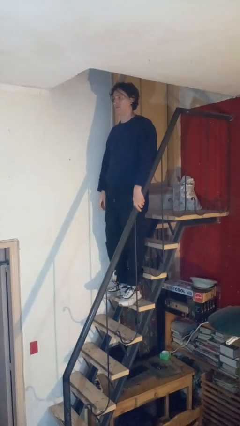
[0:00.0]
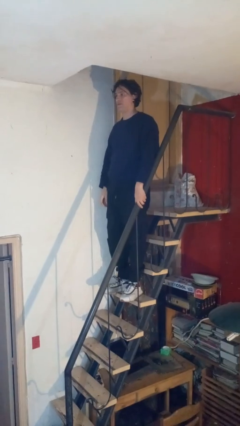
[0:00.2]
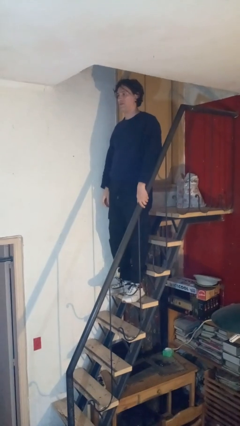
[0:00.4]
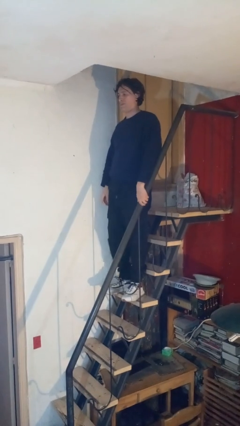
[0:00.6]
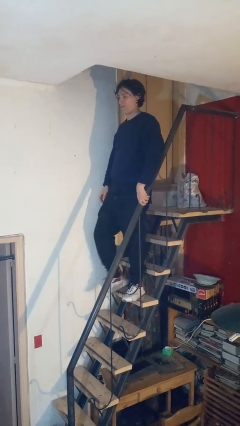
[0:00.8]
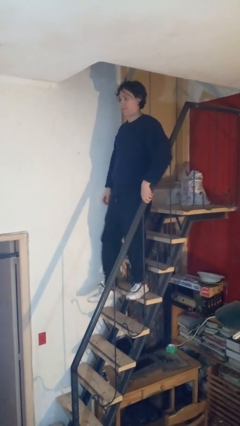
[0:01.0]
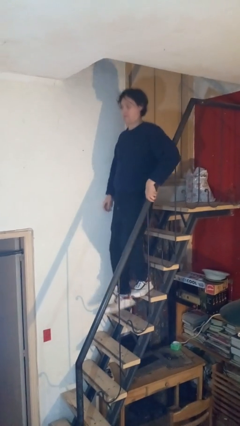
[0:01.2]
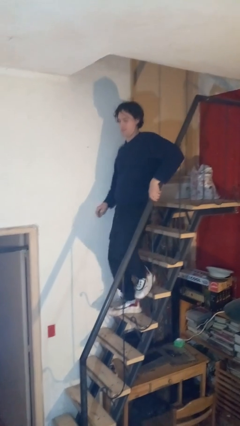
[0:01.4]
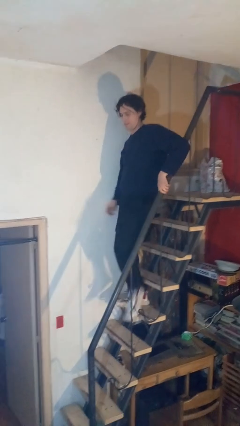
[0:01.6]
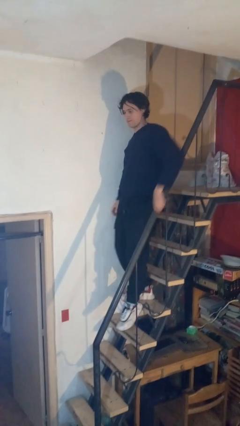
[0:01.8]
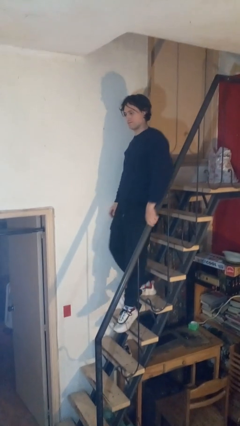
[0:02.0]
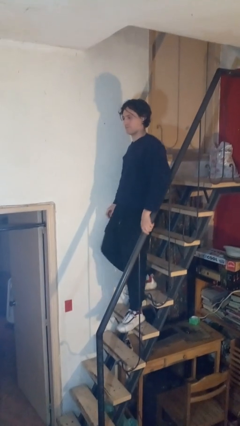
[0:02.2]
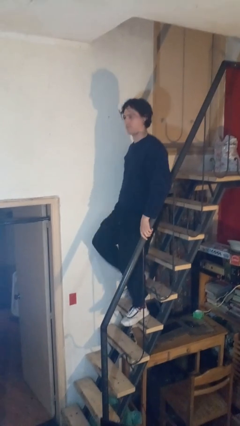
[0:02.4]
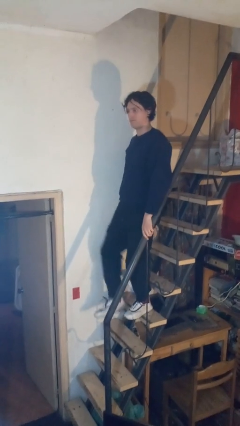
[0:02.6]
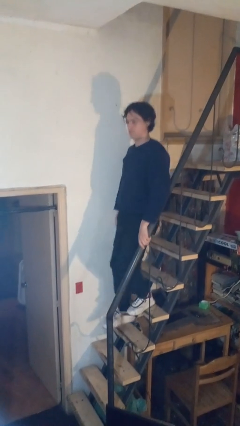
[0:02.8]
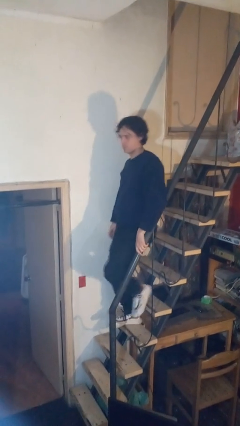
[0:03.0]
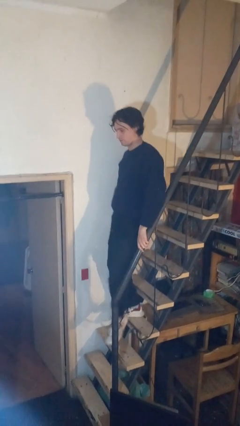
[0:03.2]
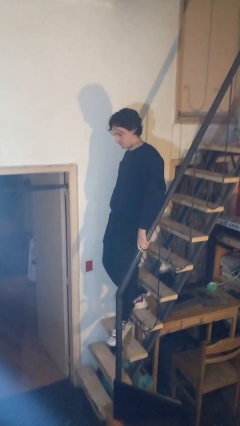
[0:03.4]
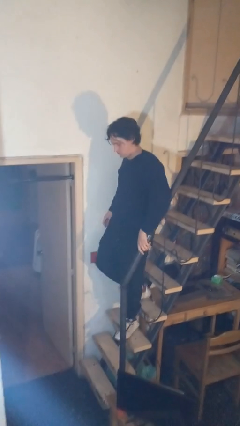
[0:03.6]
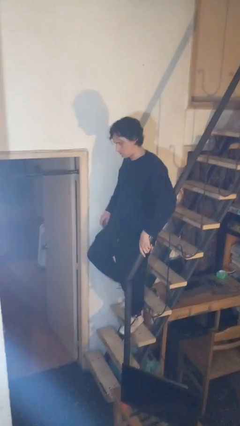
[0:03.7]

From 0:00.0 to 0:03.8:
person climbs down stairs

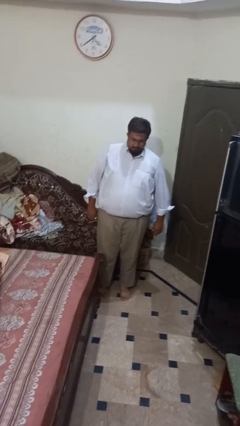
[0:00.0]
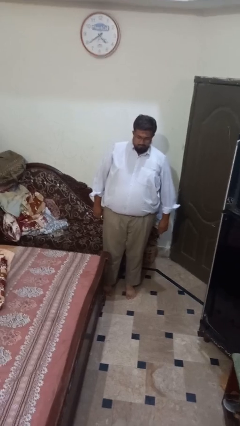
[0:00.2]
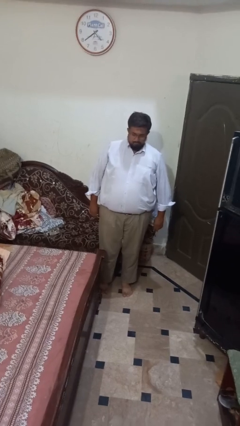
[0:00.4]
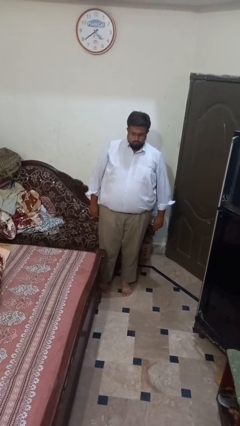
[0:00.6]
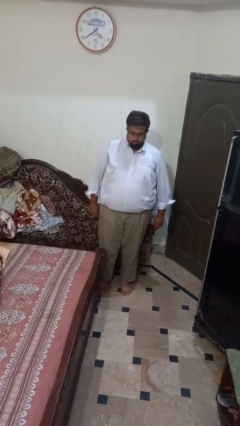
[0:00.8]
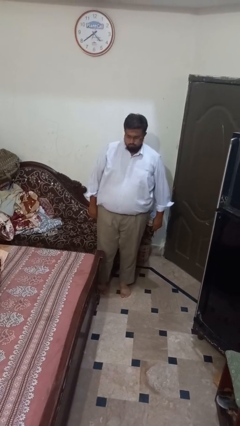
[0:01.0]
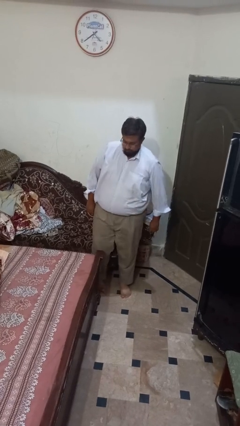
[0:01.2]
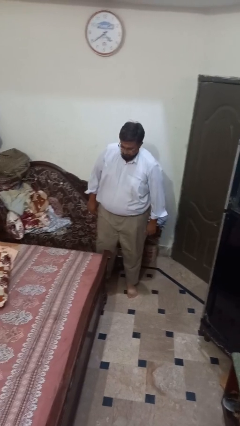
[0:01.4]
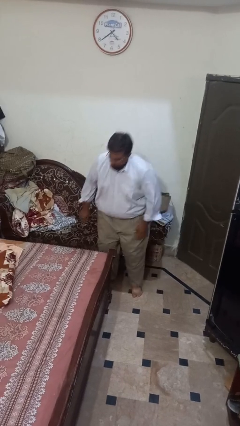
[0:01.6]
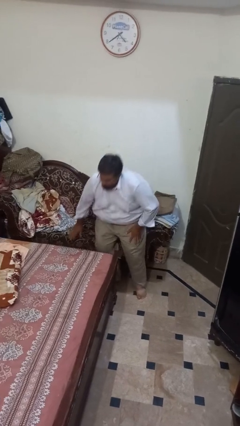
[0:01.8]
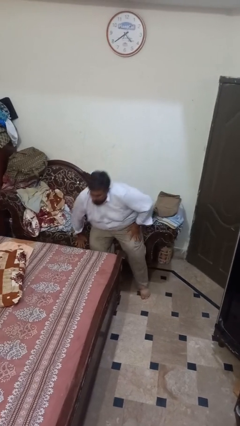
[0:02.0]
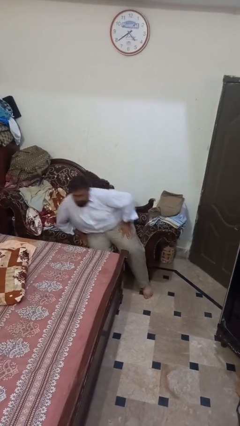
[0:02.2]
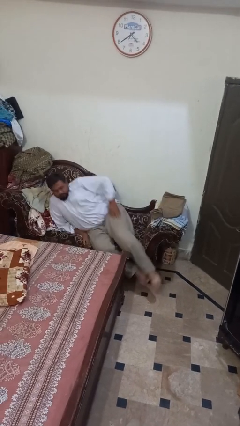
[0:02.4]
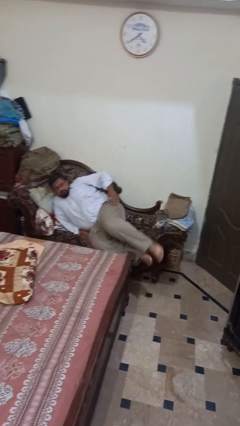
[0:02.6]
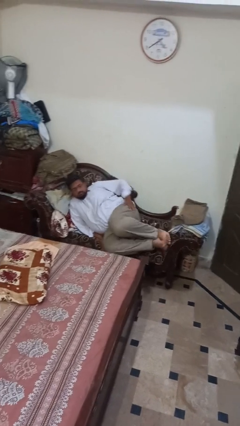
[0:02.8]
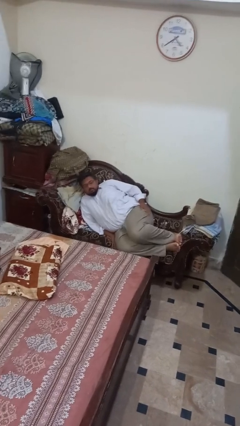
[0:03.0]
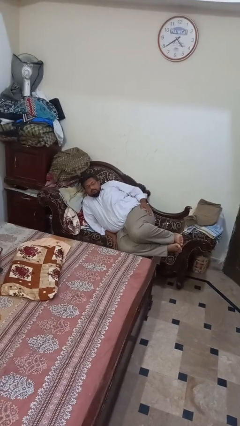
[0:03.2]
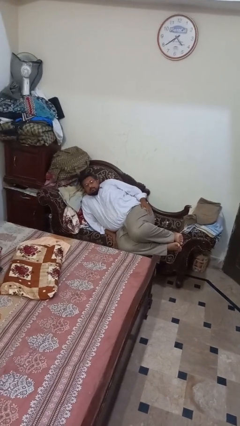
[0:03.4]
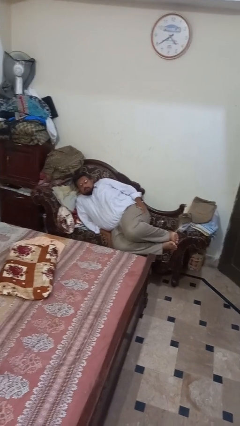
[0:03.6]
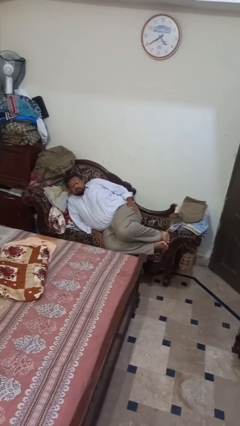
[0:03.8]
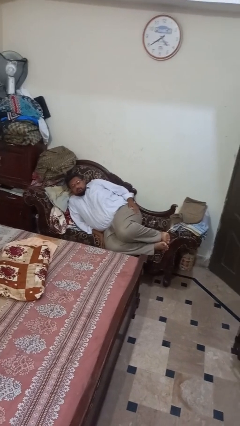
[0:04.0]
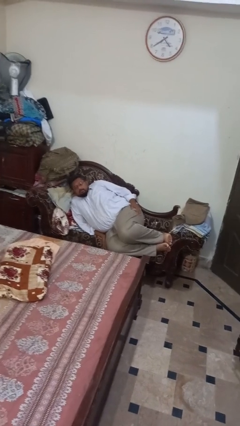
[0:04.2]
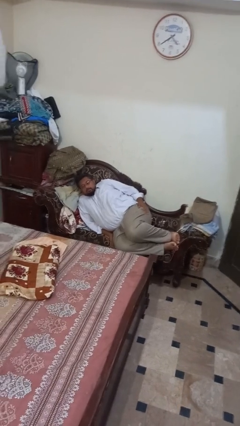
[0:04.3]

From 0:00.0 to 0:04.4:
person lies down on couch

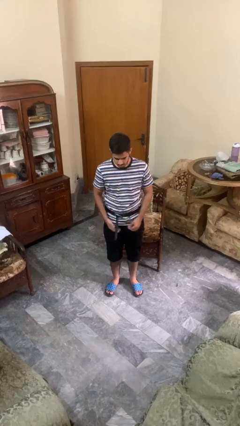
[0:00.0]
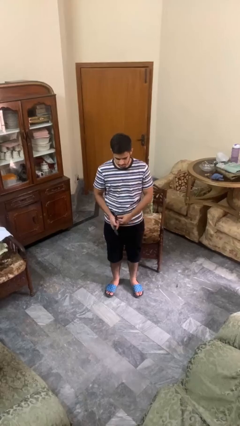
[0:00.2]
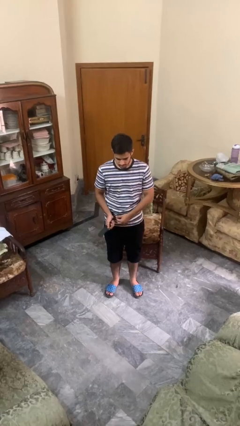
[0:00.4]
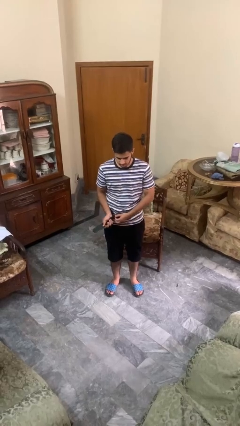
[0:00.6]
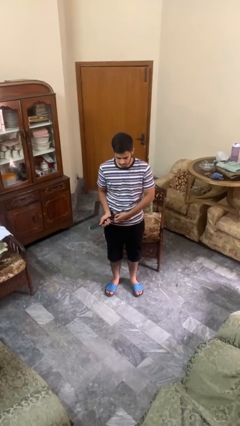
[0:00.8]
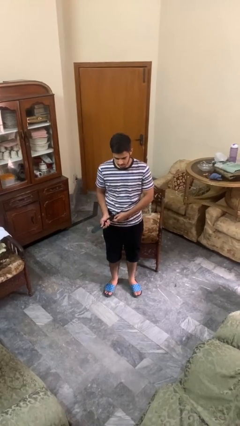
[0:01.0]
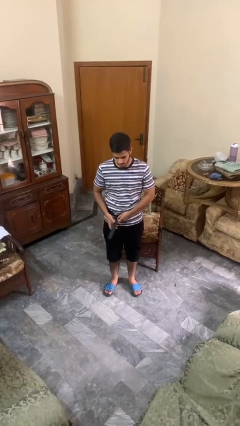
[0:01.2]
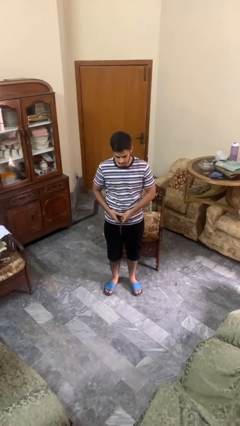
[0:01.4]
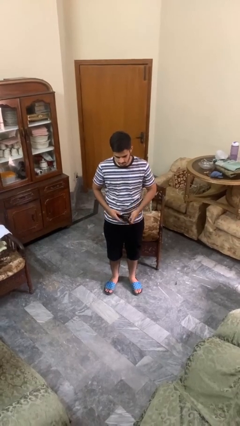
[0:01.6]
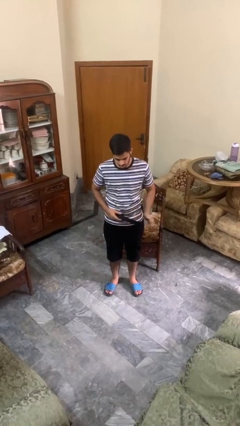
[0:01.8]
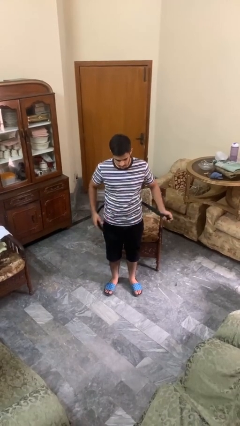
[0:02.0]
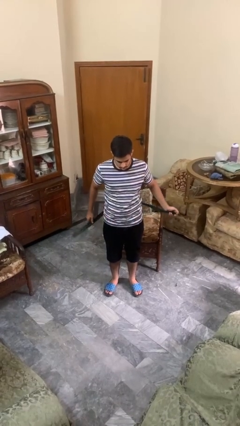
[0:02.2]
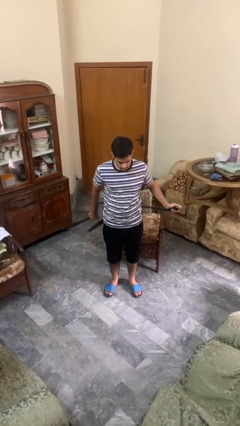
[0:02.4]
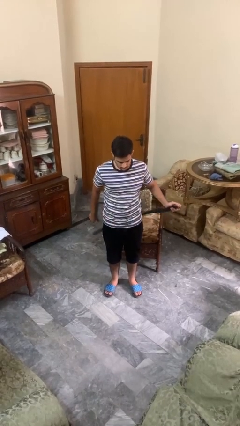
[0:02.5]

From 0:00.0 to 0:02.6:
person takes off belt

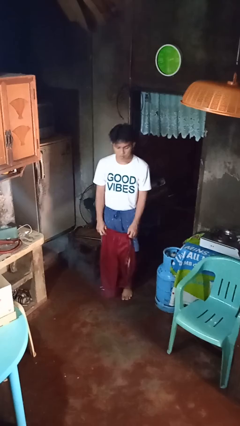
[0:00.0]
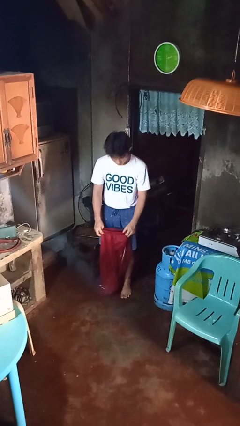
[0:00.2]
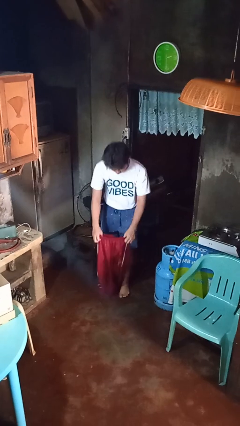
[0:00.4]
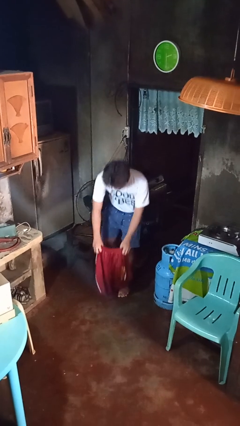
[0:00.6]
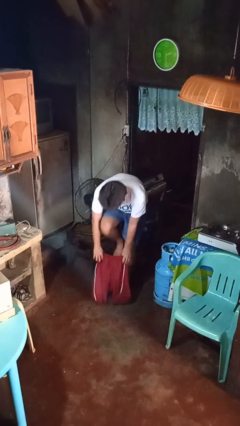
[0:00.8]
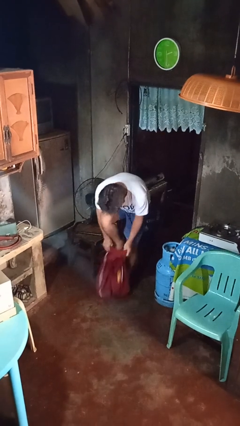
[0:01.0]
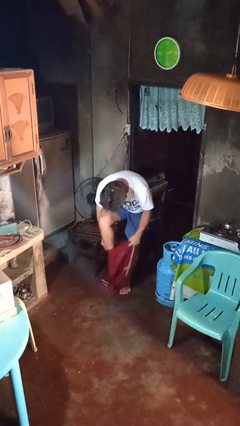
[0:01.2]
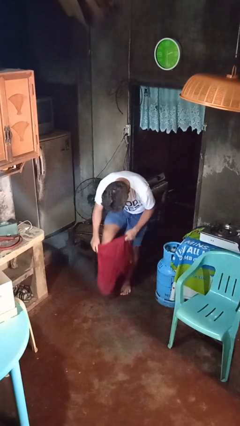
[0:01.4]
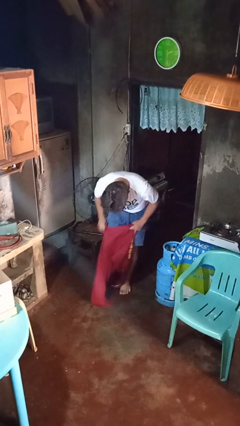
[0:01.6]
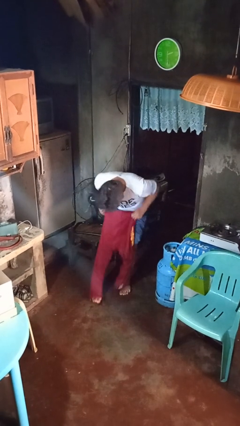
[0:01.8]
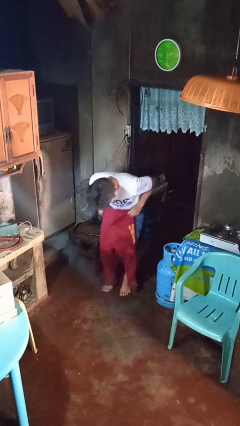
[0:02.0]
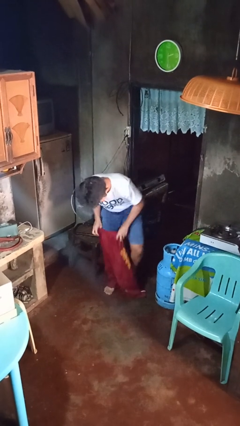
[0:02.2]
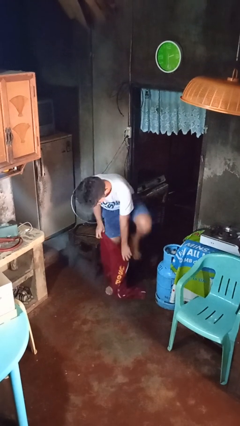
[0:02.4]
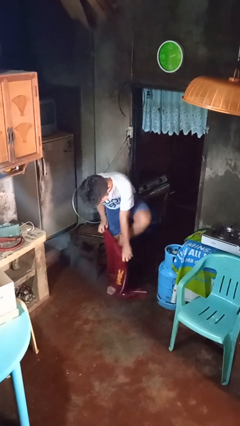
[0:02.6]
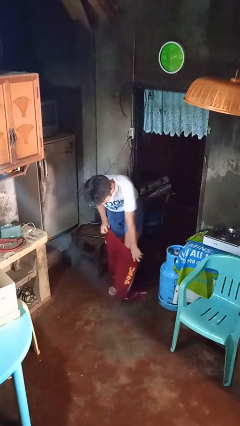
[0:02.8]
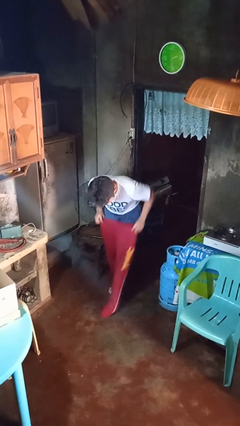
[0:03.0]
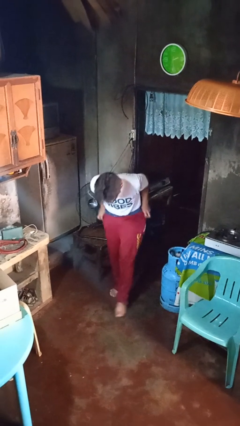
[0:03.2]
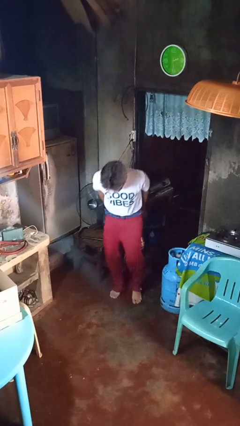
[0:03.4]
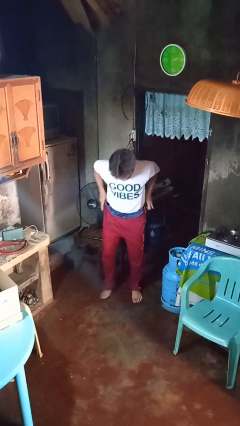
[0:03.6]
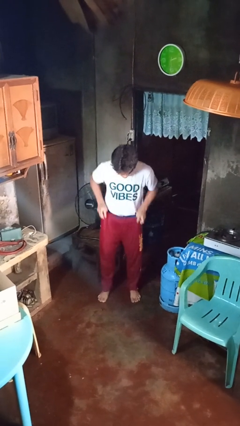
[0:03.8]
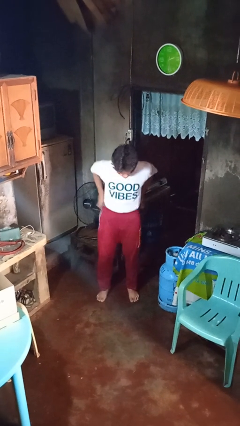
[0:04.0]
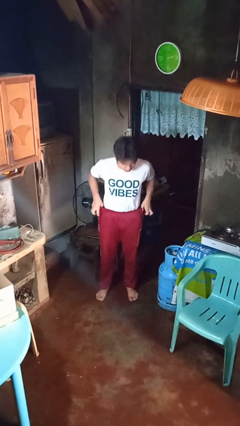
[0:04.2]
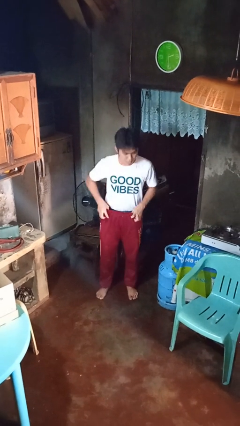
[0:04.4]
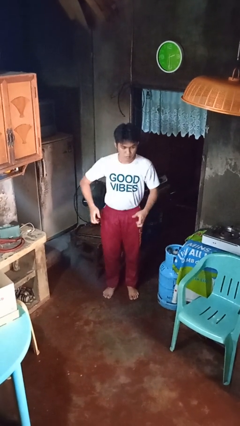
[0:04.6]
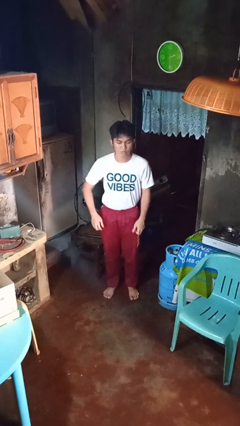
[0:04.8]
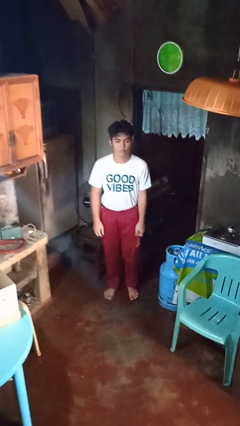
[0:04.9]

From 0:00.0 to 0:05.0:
person puts on pants

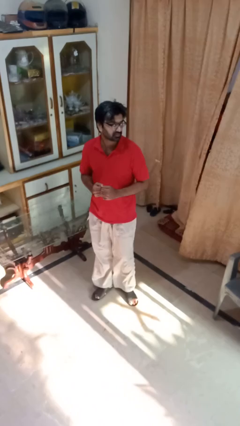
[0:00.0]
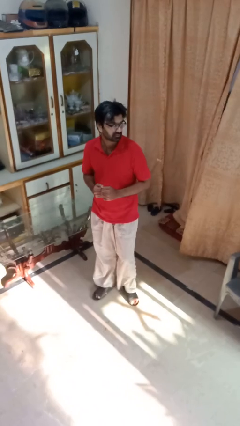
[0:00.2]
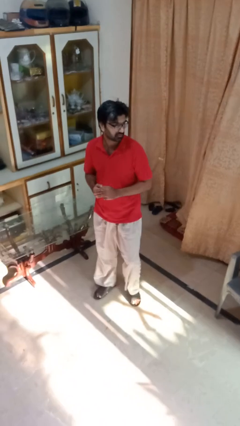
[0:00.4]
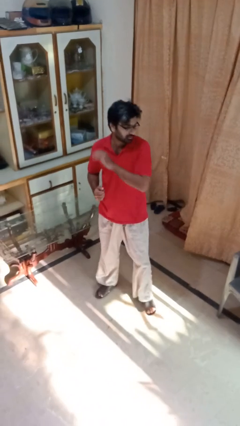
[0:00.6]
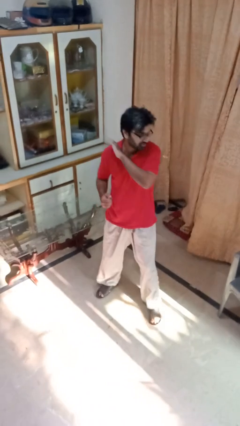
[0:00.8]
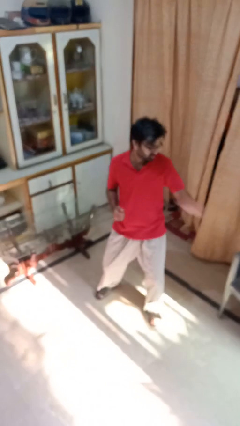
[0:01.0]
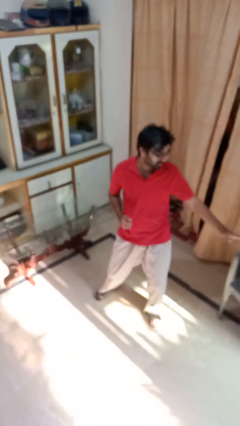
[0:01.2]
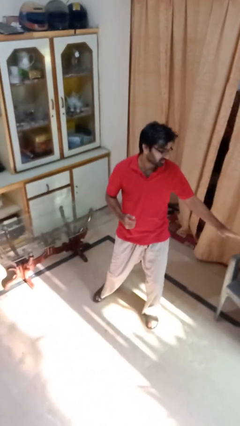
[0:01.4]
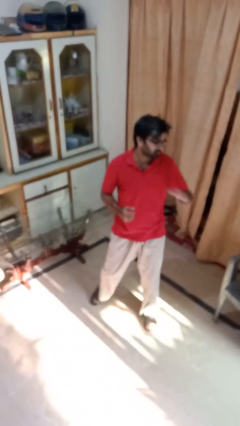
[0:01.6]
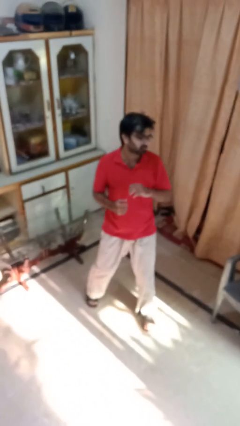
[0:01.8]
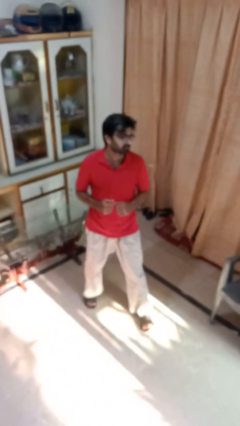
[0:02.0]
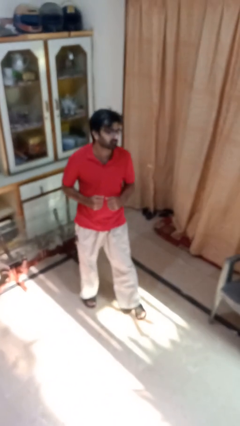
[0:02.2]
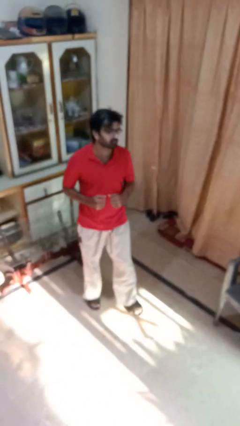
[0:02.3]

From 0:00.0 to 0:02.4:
person karate chop
